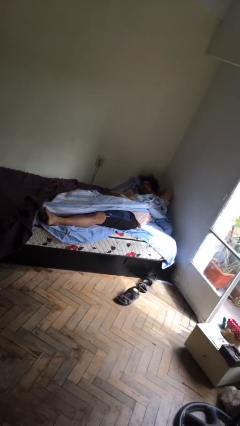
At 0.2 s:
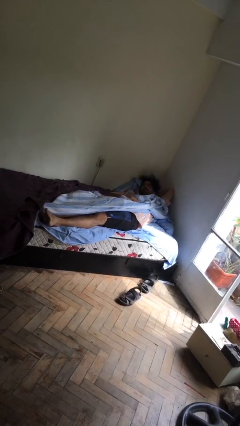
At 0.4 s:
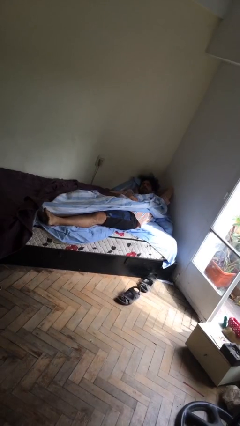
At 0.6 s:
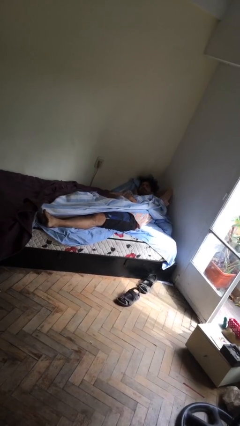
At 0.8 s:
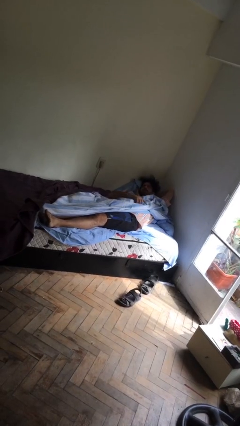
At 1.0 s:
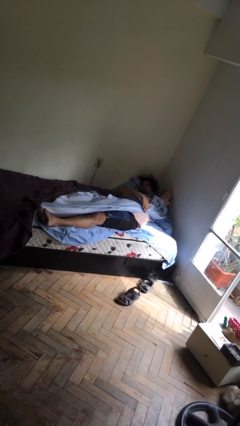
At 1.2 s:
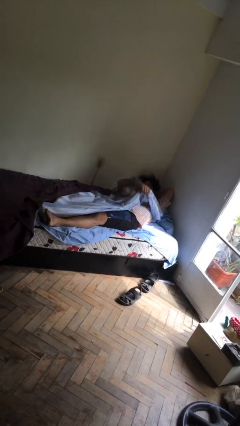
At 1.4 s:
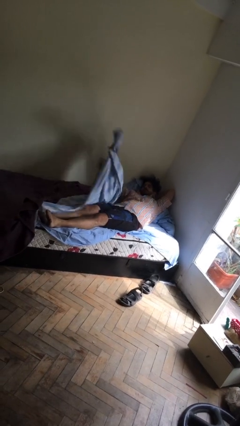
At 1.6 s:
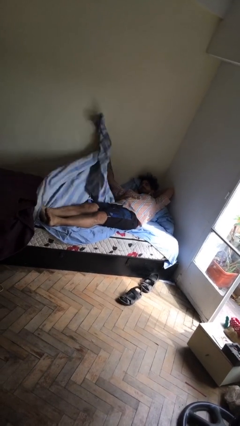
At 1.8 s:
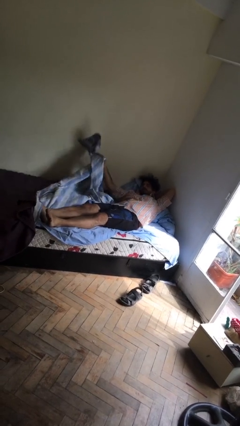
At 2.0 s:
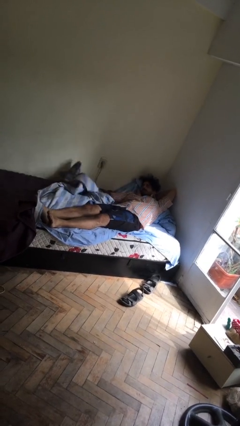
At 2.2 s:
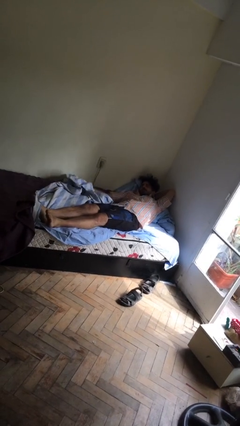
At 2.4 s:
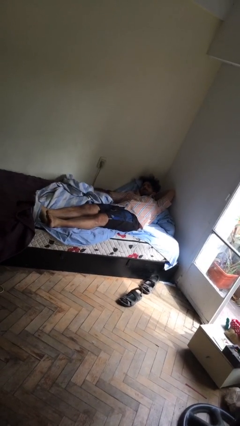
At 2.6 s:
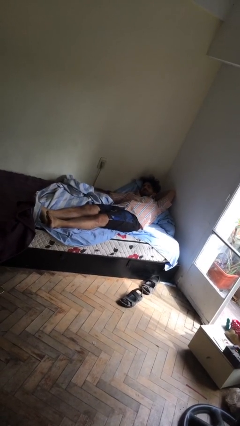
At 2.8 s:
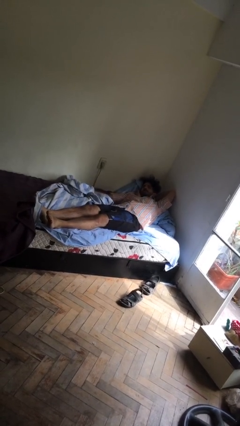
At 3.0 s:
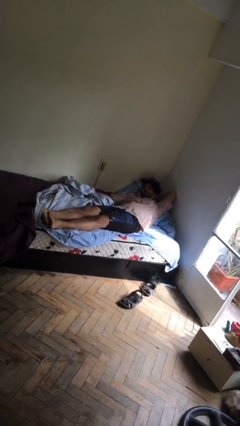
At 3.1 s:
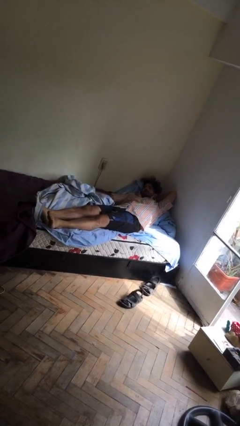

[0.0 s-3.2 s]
person uncovers with bedsheets

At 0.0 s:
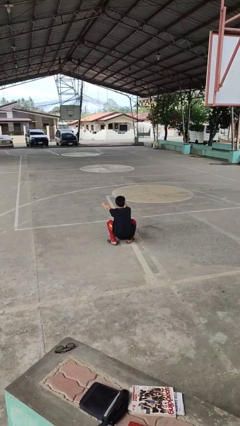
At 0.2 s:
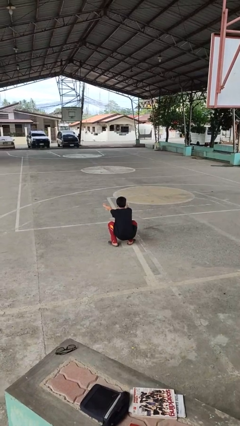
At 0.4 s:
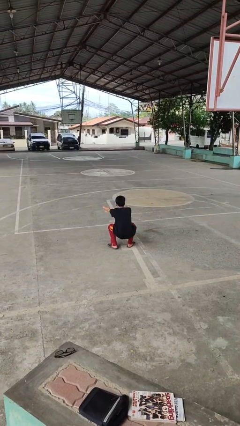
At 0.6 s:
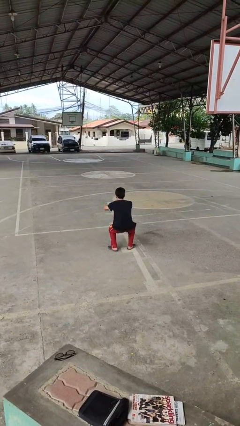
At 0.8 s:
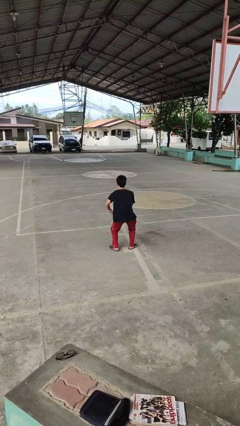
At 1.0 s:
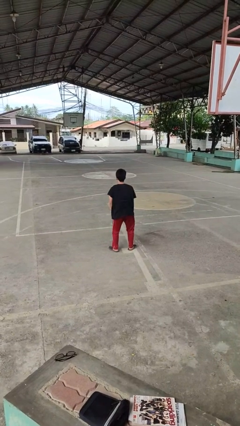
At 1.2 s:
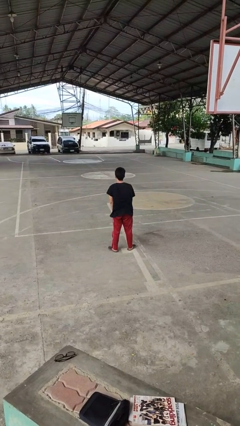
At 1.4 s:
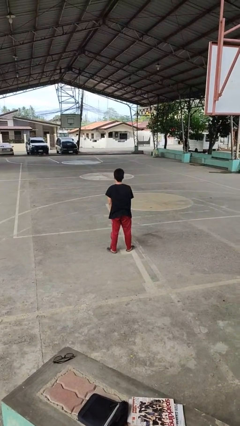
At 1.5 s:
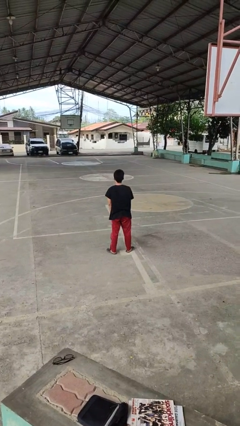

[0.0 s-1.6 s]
person stands up

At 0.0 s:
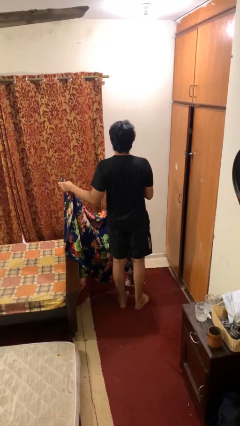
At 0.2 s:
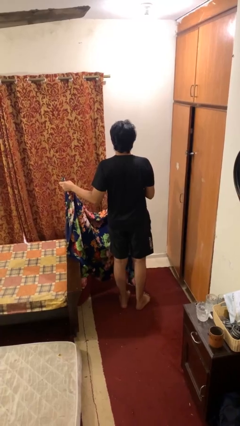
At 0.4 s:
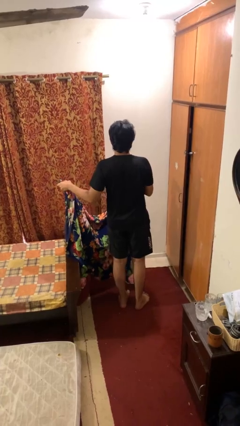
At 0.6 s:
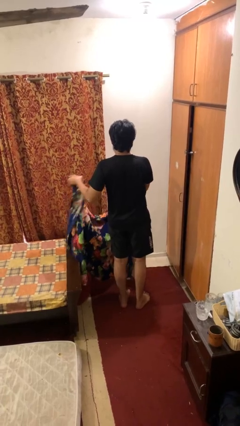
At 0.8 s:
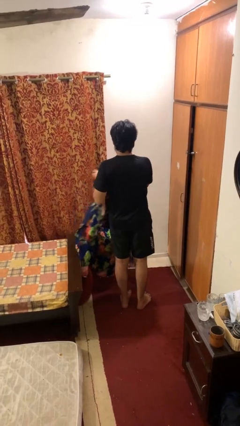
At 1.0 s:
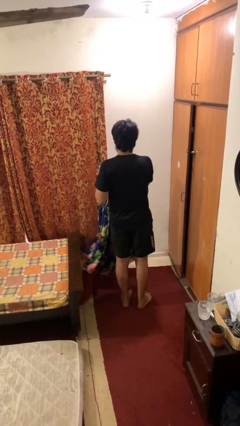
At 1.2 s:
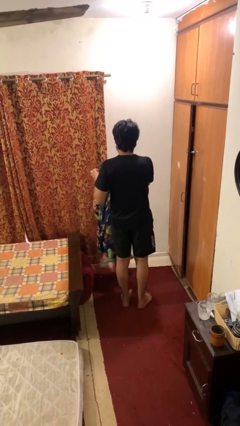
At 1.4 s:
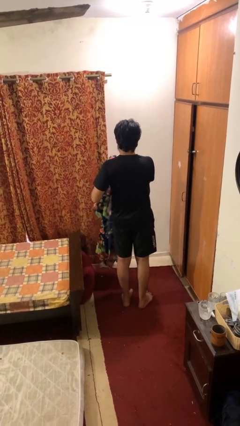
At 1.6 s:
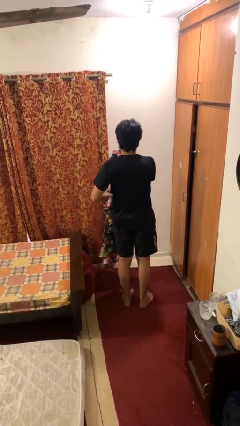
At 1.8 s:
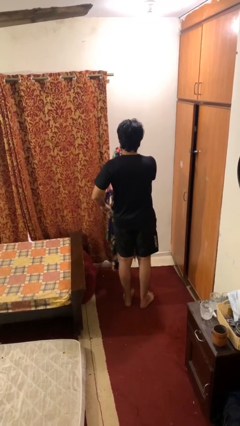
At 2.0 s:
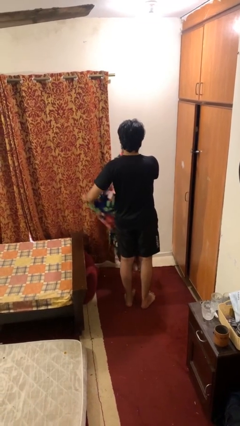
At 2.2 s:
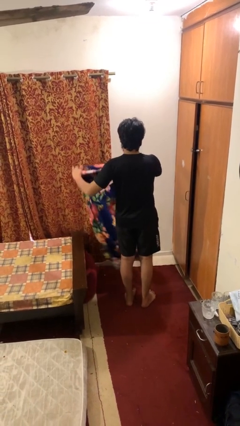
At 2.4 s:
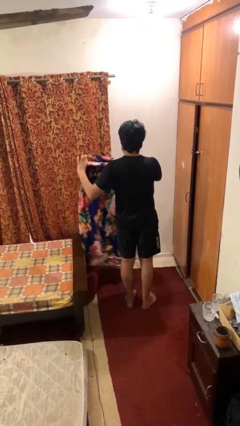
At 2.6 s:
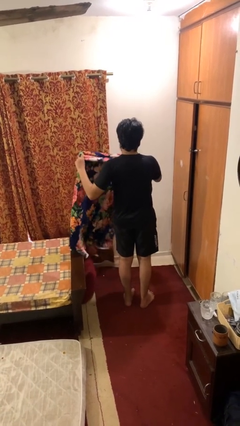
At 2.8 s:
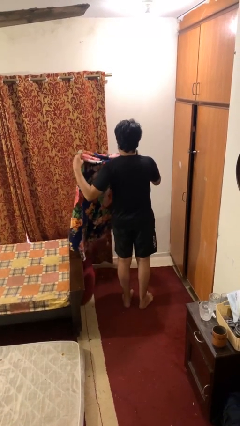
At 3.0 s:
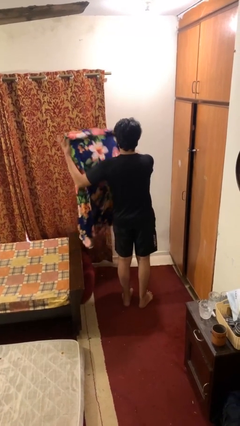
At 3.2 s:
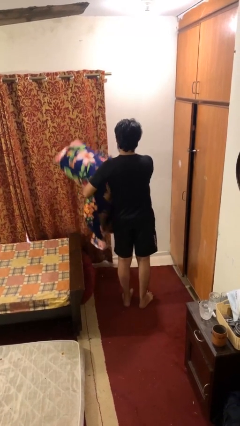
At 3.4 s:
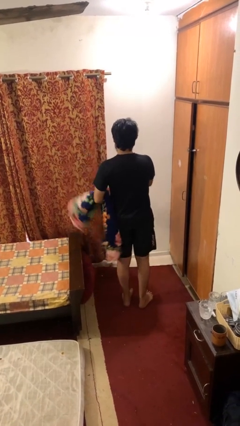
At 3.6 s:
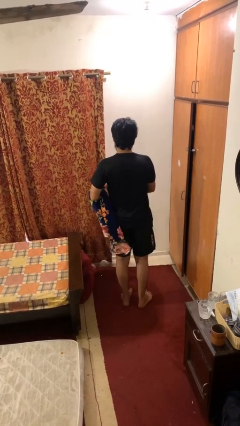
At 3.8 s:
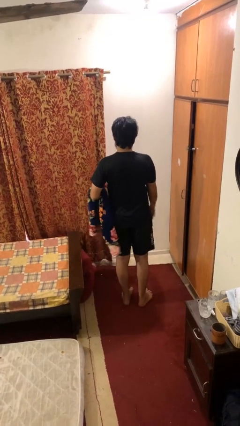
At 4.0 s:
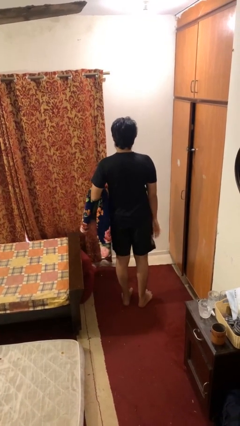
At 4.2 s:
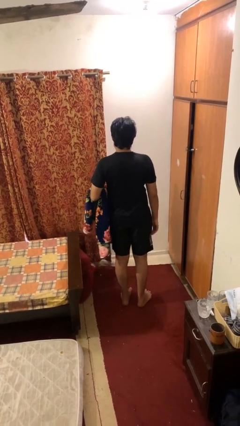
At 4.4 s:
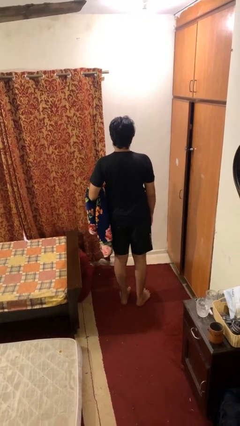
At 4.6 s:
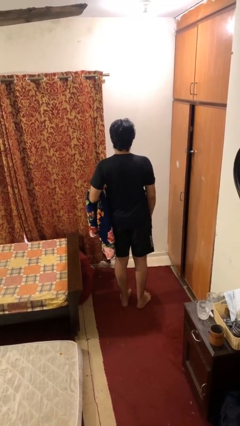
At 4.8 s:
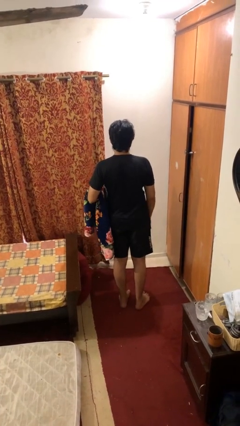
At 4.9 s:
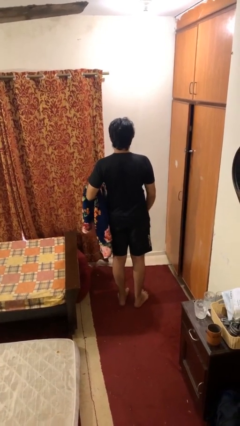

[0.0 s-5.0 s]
person folds blanket

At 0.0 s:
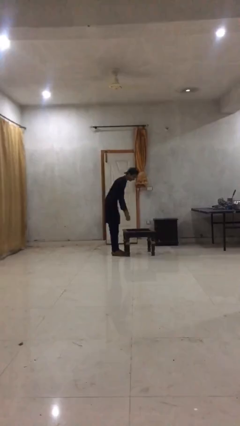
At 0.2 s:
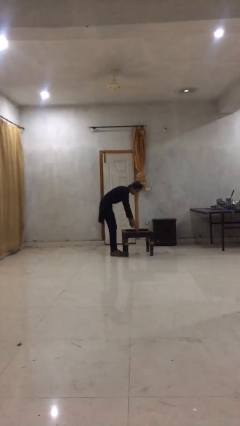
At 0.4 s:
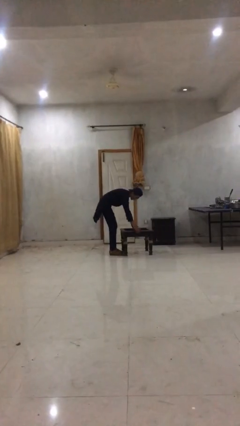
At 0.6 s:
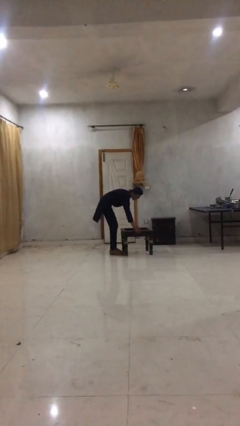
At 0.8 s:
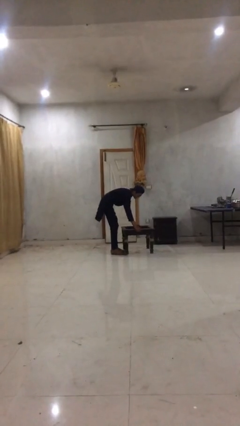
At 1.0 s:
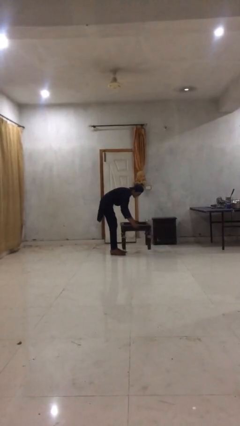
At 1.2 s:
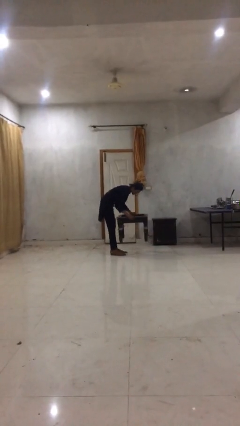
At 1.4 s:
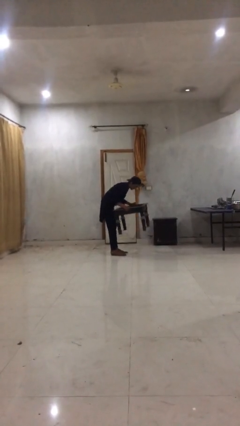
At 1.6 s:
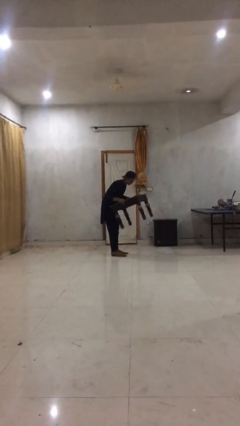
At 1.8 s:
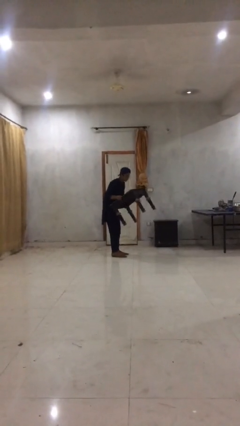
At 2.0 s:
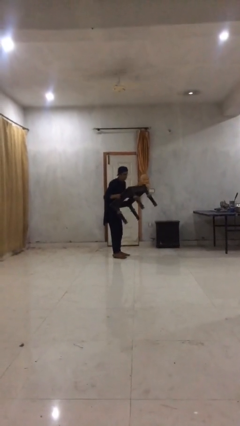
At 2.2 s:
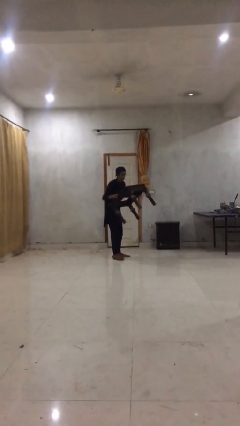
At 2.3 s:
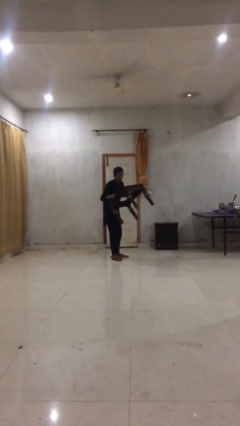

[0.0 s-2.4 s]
person picks up object from floor

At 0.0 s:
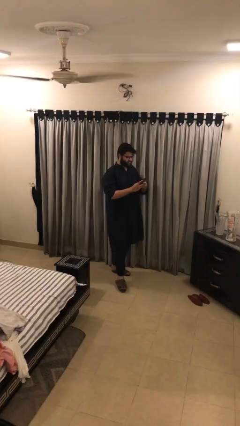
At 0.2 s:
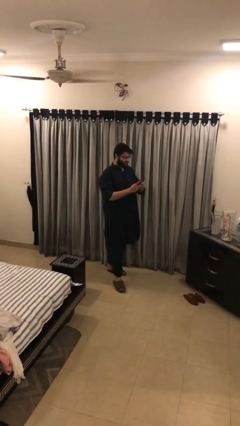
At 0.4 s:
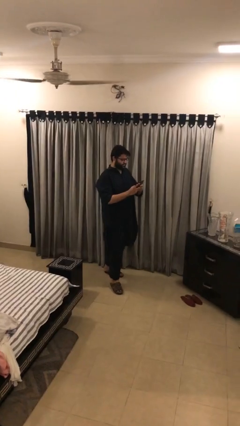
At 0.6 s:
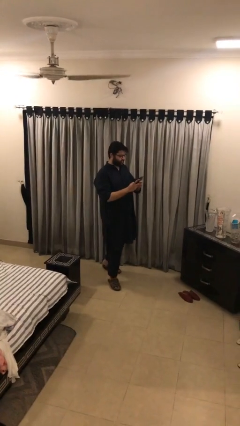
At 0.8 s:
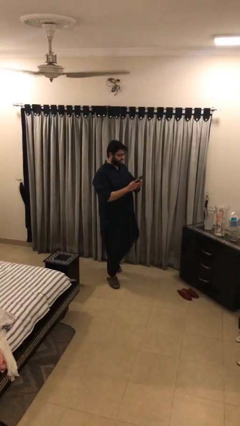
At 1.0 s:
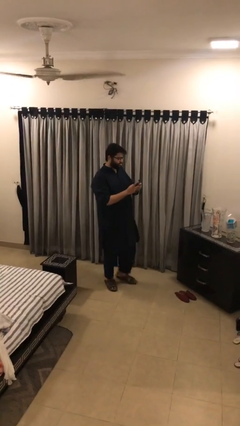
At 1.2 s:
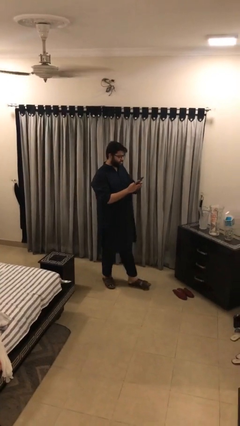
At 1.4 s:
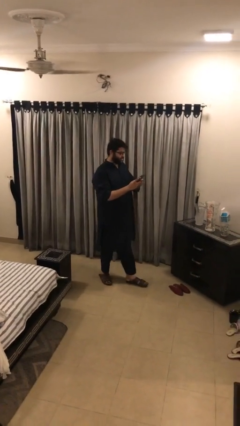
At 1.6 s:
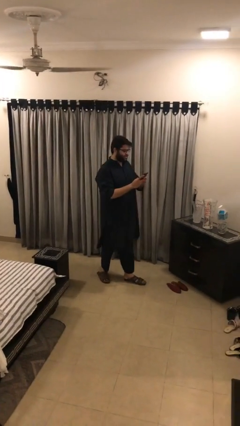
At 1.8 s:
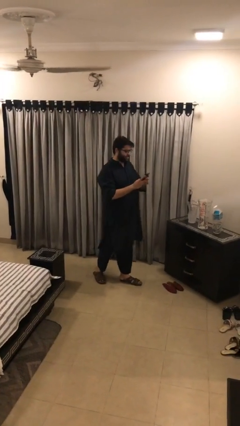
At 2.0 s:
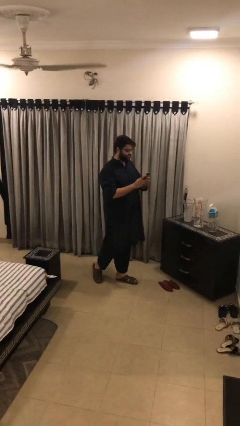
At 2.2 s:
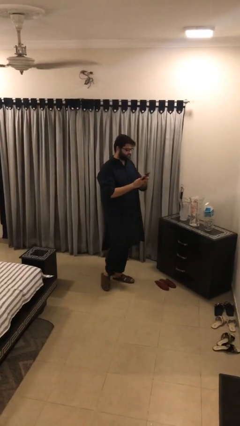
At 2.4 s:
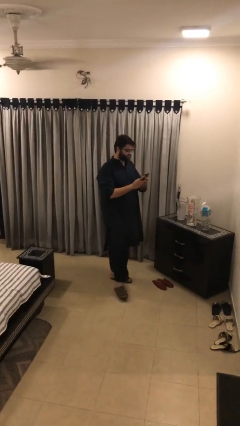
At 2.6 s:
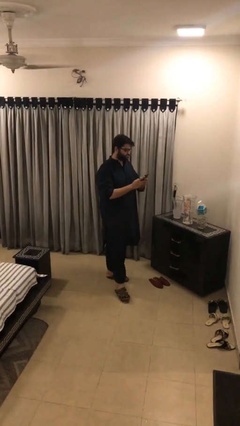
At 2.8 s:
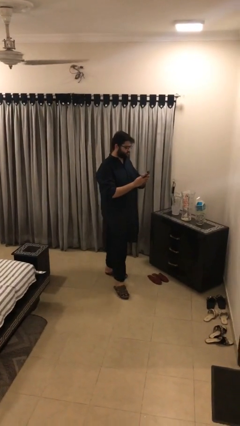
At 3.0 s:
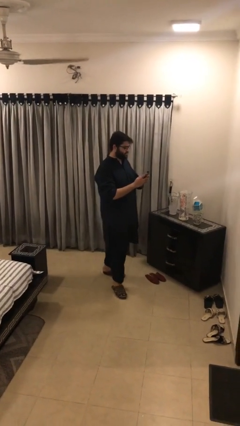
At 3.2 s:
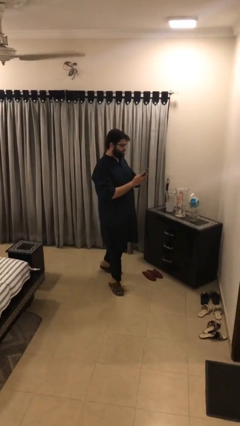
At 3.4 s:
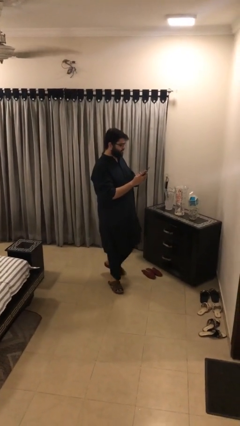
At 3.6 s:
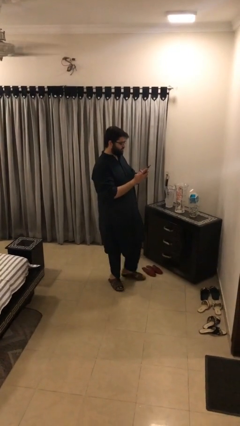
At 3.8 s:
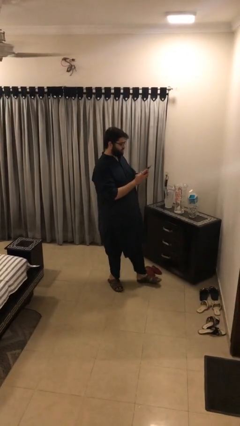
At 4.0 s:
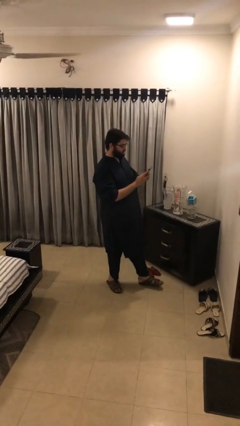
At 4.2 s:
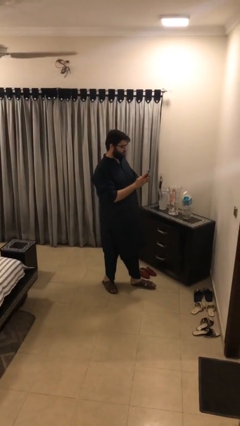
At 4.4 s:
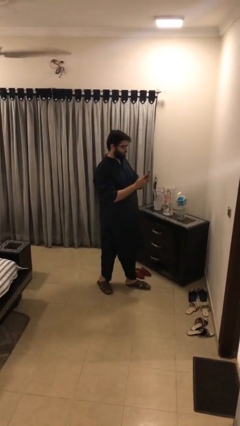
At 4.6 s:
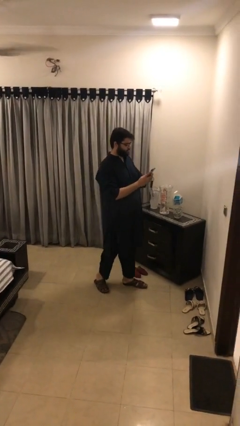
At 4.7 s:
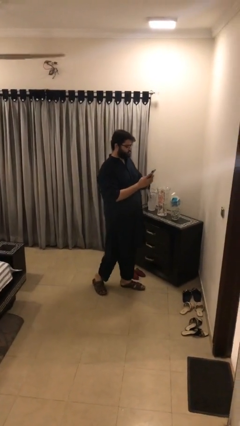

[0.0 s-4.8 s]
person texts on phone

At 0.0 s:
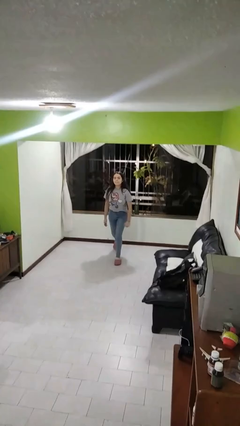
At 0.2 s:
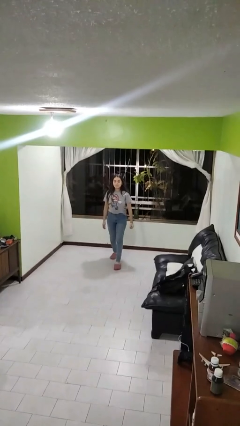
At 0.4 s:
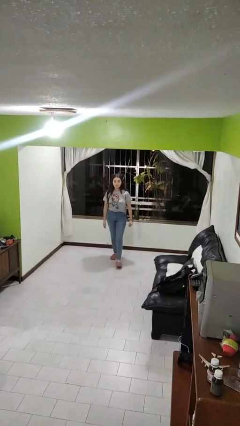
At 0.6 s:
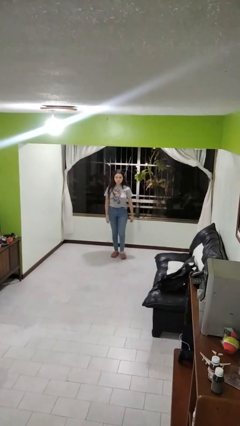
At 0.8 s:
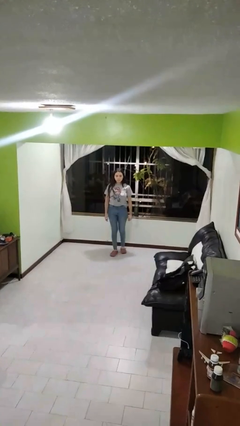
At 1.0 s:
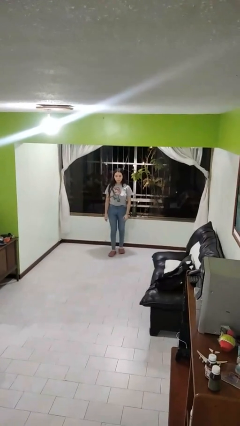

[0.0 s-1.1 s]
person stands up from floor
